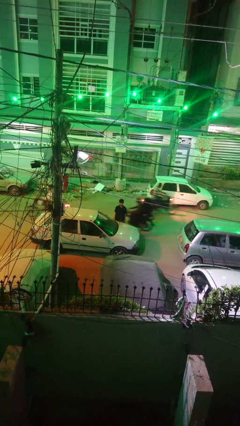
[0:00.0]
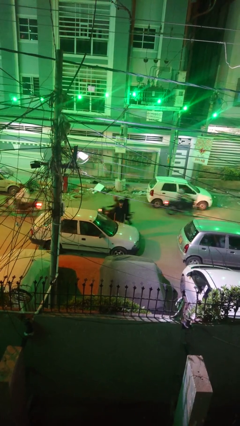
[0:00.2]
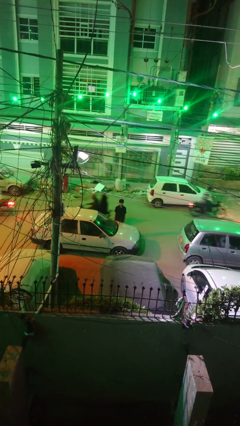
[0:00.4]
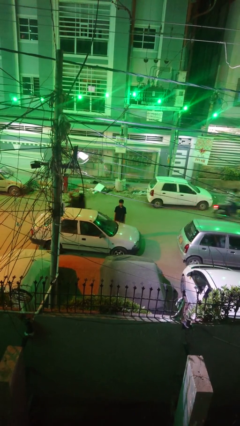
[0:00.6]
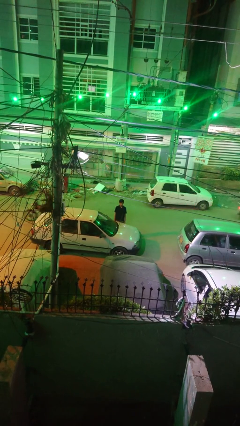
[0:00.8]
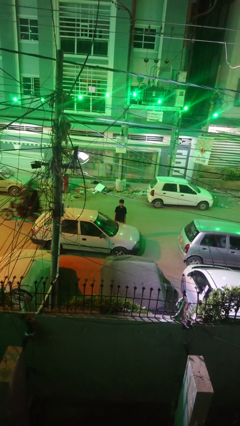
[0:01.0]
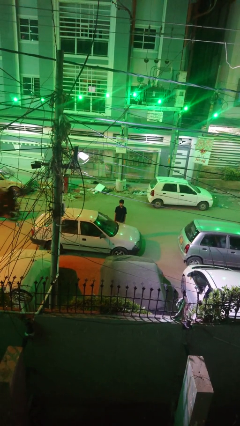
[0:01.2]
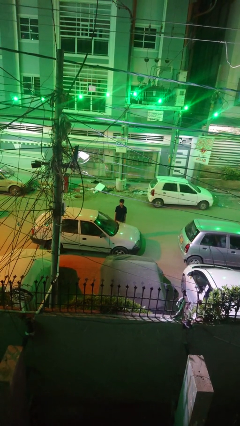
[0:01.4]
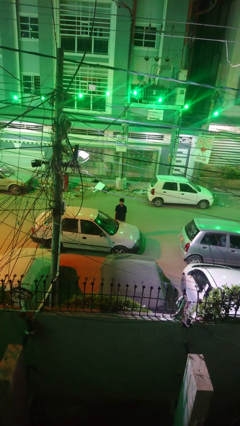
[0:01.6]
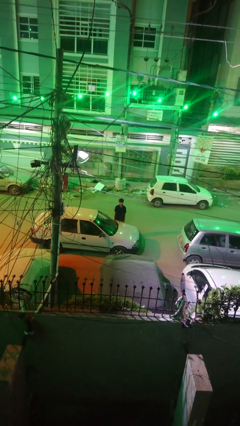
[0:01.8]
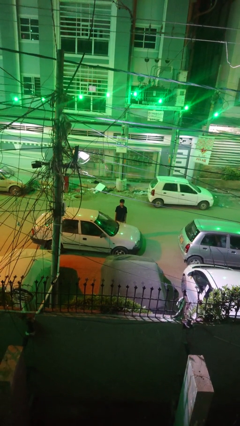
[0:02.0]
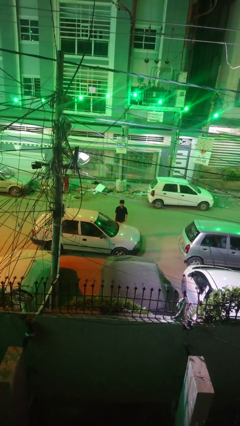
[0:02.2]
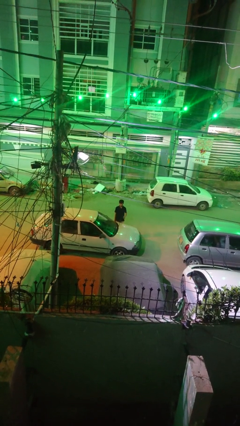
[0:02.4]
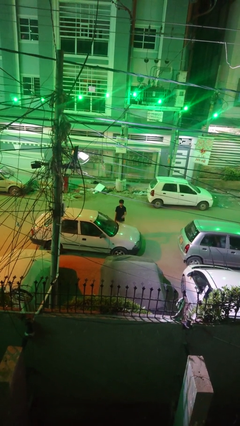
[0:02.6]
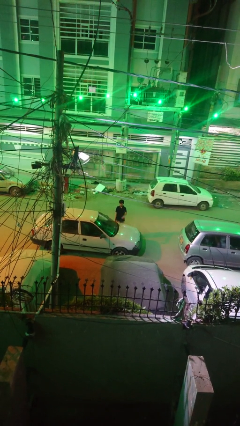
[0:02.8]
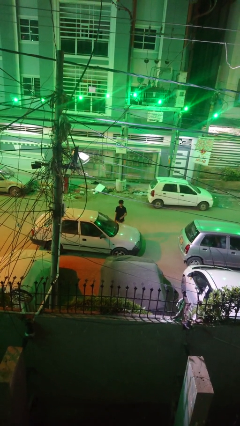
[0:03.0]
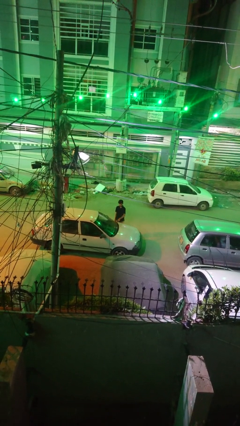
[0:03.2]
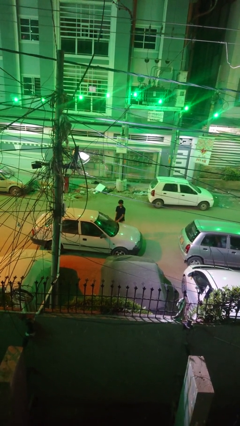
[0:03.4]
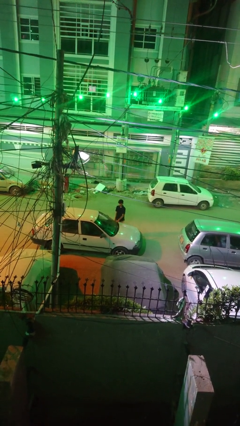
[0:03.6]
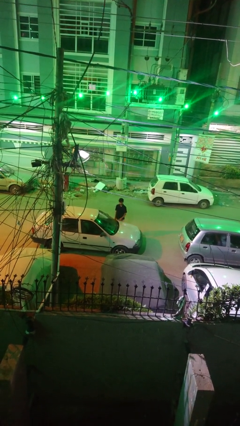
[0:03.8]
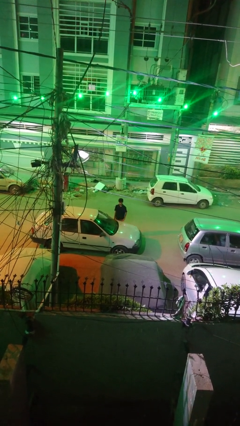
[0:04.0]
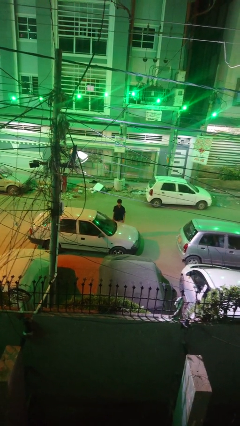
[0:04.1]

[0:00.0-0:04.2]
person flips down car wipers

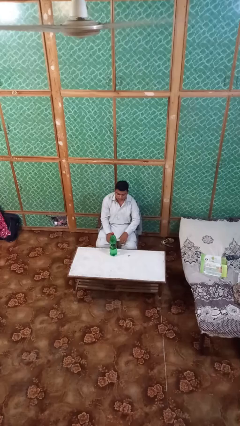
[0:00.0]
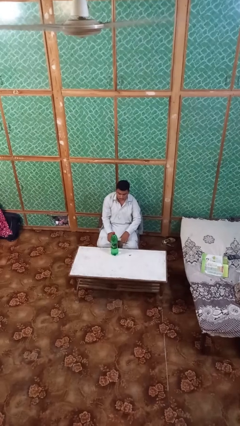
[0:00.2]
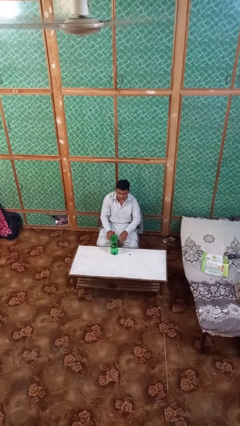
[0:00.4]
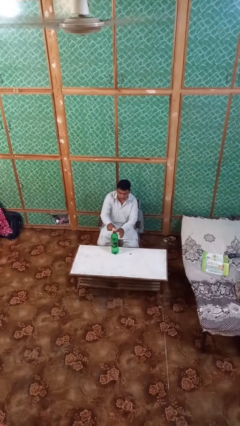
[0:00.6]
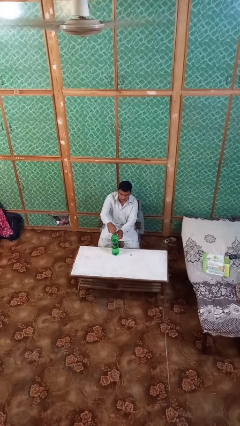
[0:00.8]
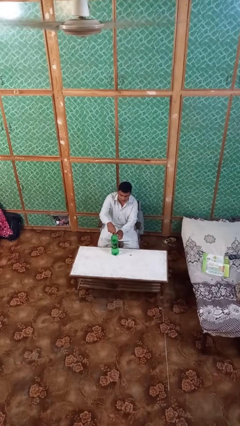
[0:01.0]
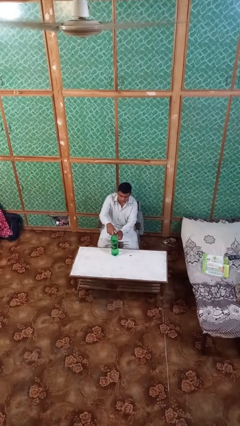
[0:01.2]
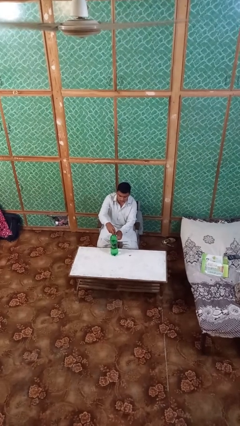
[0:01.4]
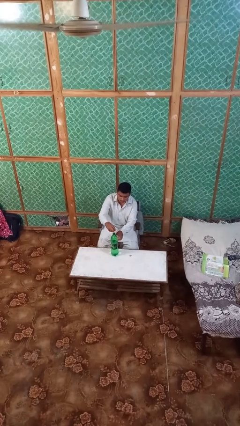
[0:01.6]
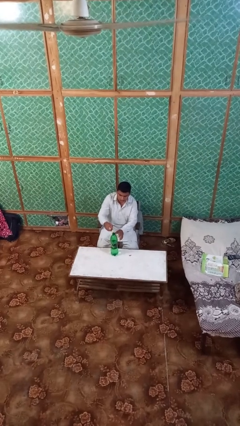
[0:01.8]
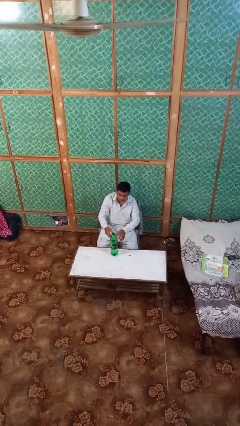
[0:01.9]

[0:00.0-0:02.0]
person unscrews lid from bottle

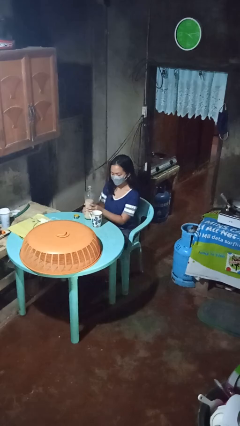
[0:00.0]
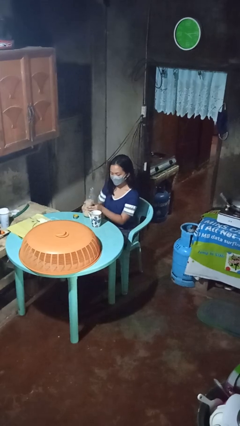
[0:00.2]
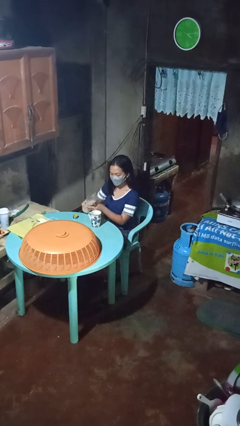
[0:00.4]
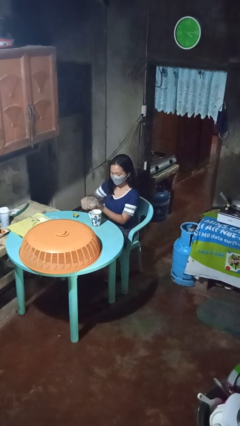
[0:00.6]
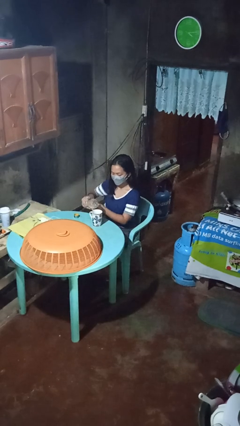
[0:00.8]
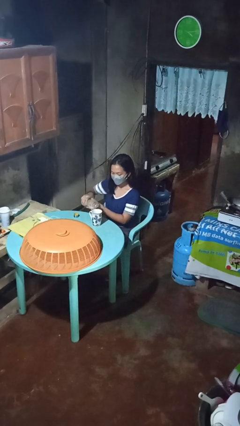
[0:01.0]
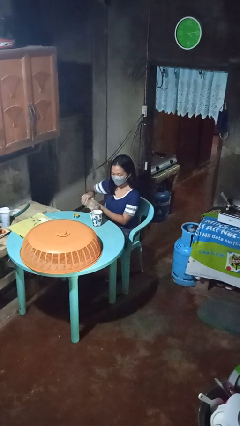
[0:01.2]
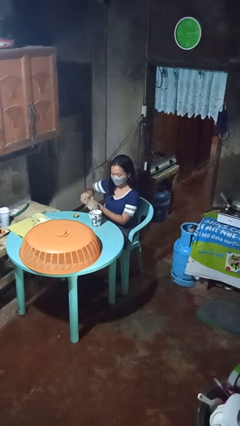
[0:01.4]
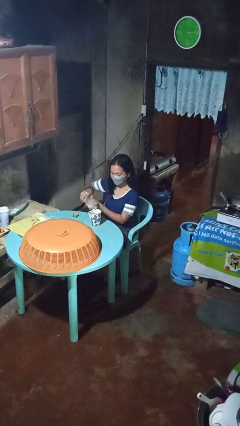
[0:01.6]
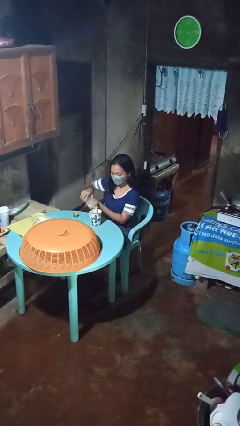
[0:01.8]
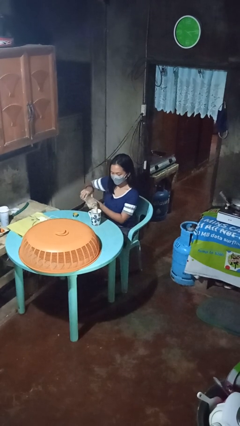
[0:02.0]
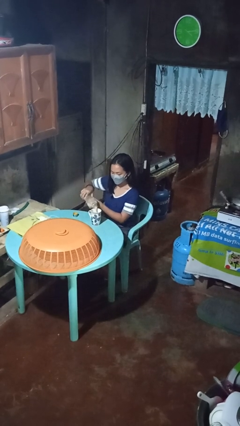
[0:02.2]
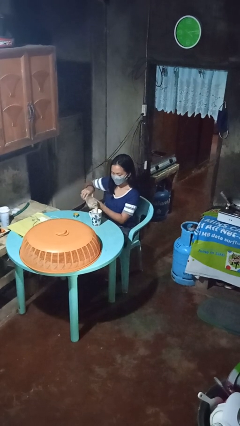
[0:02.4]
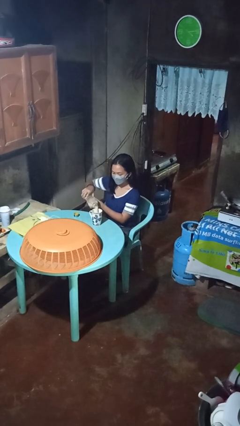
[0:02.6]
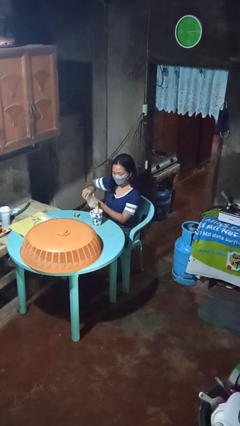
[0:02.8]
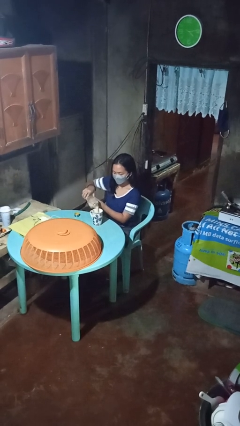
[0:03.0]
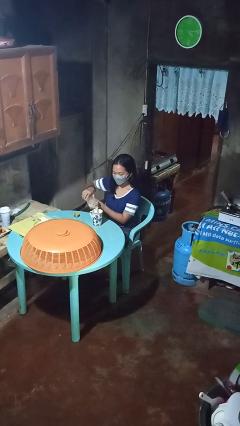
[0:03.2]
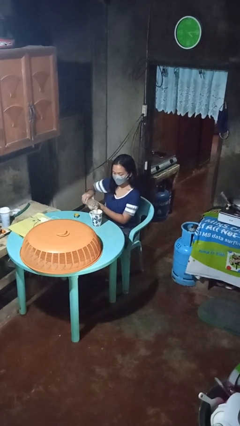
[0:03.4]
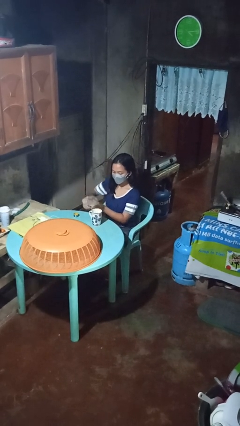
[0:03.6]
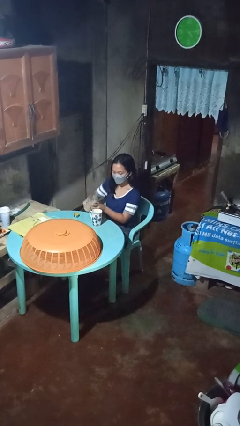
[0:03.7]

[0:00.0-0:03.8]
person pours coffee into mug

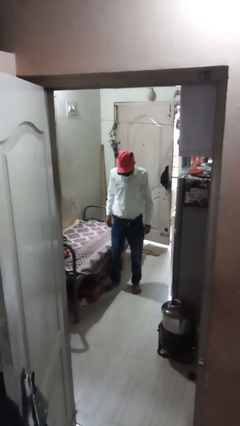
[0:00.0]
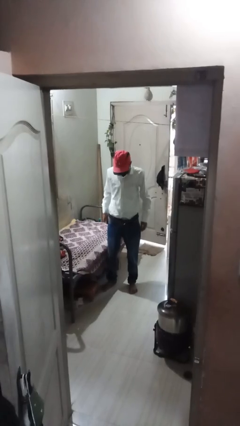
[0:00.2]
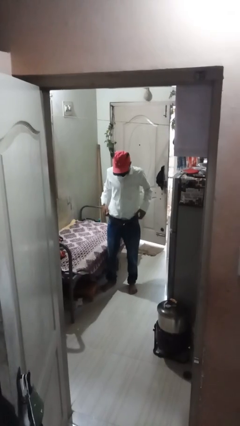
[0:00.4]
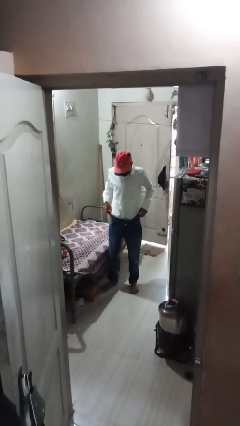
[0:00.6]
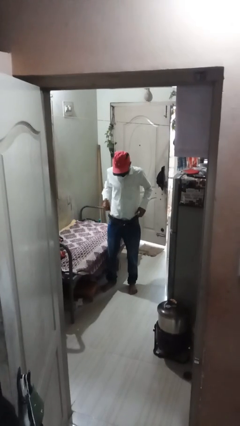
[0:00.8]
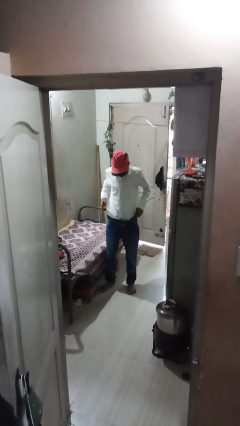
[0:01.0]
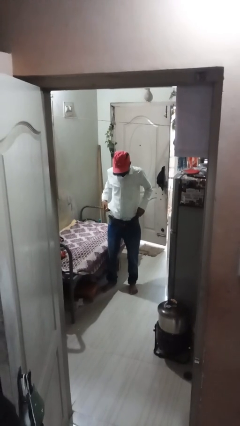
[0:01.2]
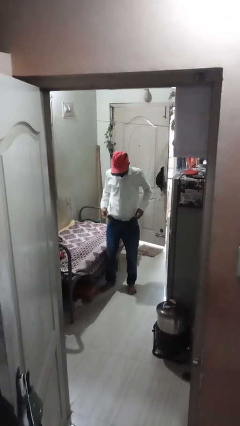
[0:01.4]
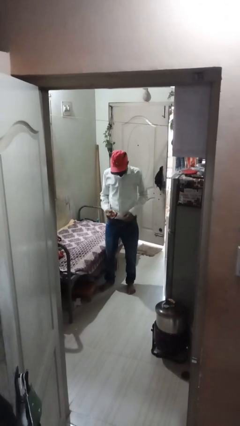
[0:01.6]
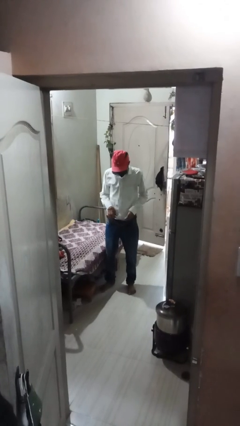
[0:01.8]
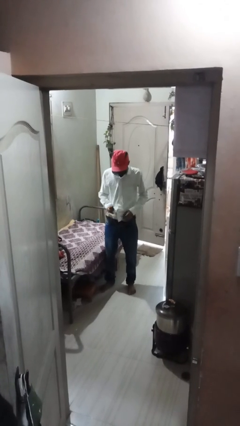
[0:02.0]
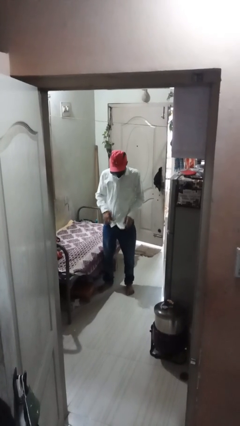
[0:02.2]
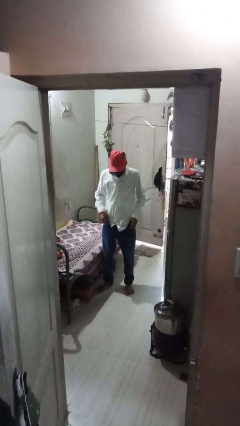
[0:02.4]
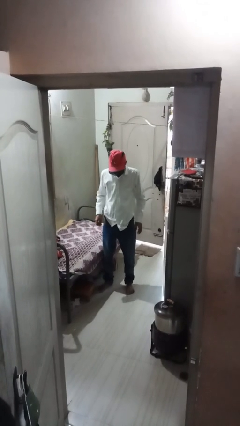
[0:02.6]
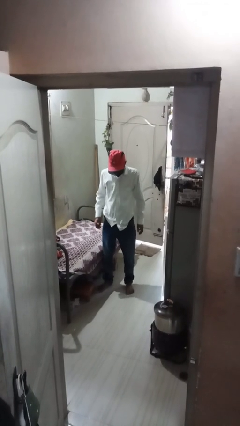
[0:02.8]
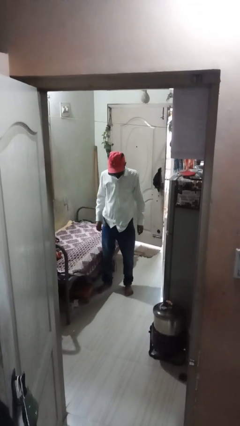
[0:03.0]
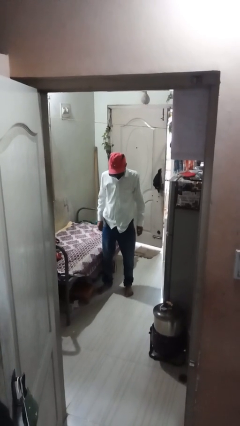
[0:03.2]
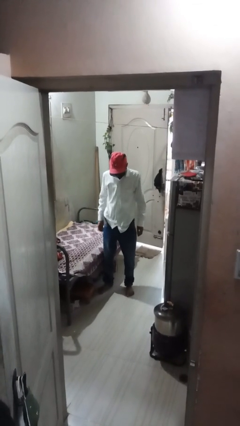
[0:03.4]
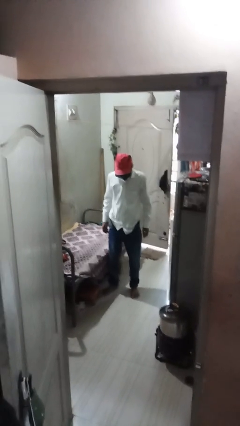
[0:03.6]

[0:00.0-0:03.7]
person untucks shirt

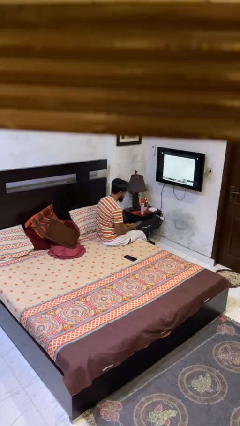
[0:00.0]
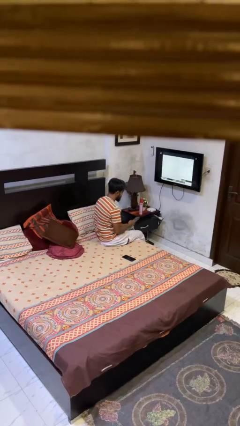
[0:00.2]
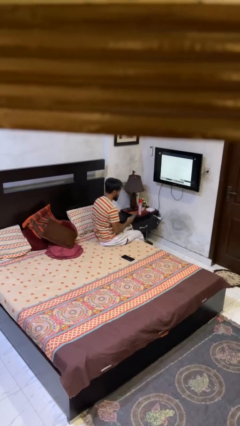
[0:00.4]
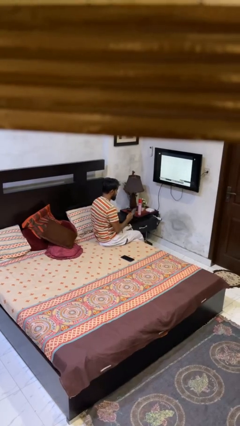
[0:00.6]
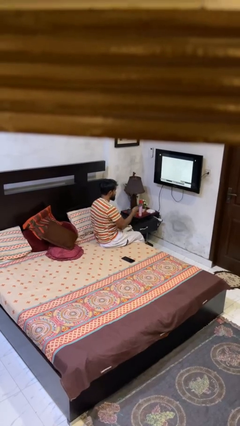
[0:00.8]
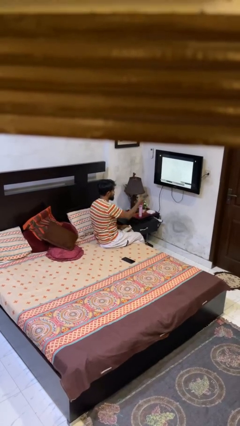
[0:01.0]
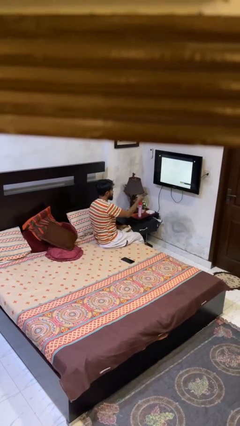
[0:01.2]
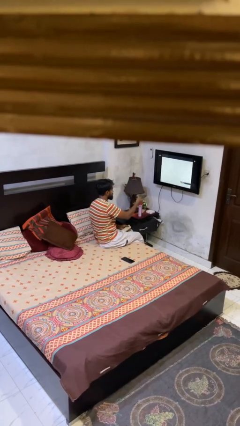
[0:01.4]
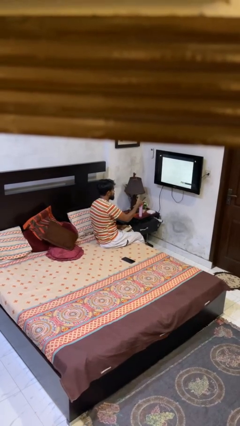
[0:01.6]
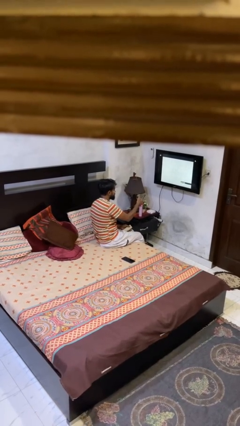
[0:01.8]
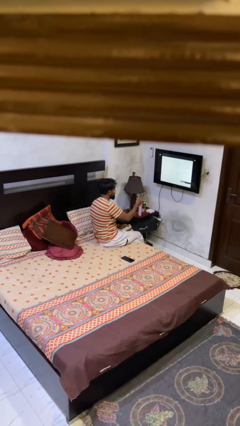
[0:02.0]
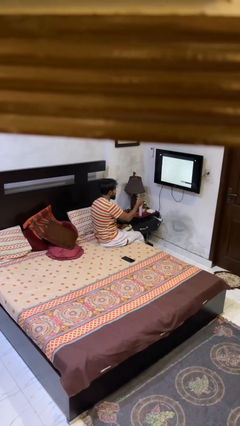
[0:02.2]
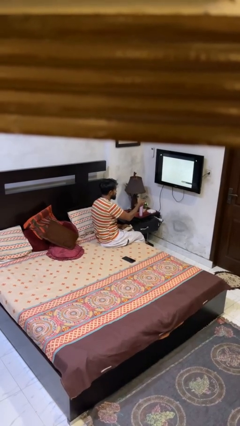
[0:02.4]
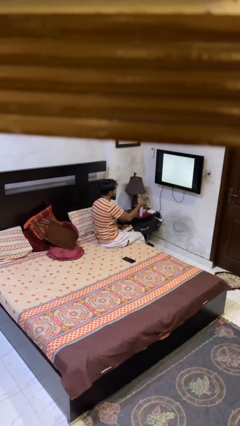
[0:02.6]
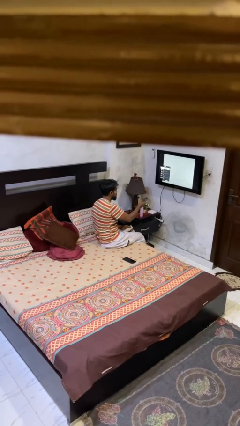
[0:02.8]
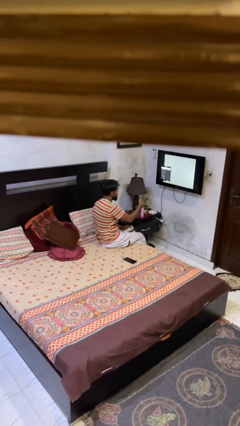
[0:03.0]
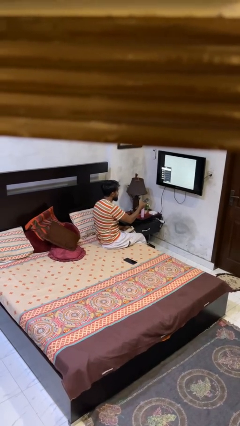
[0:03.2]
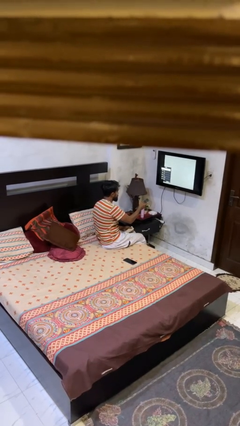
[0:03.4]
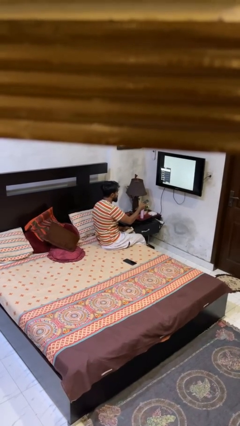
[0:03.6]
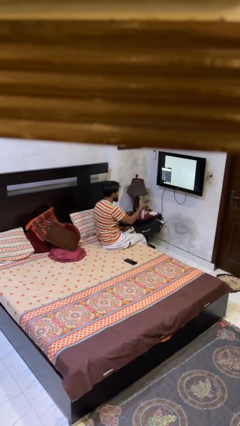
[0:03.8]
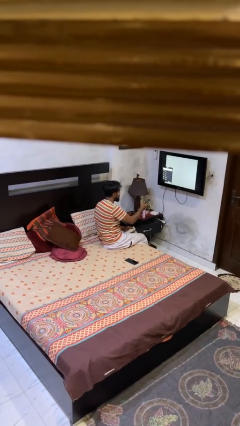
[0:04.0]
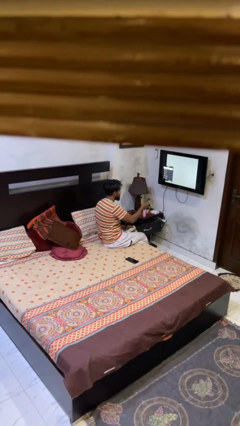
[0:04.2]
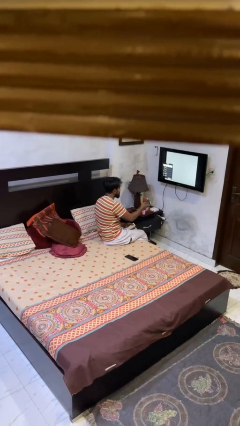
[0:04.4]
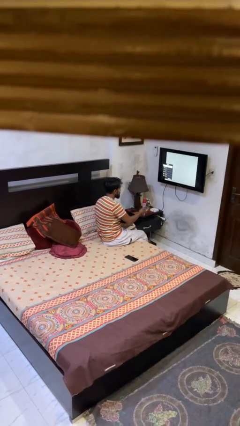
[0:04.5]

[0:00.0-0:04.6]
person uses television remote
